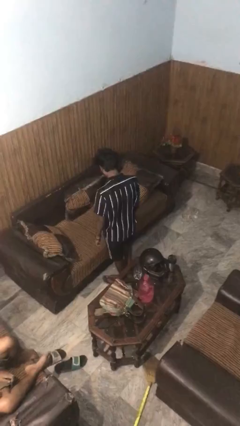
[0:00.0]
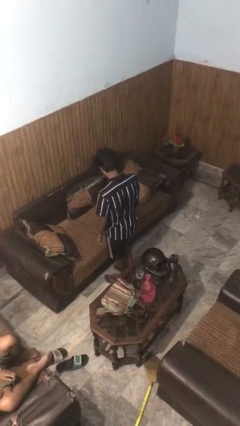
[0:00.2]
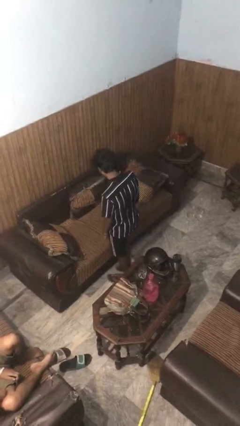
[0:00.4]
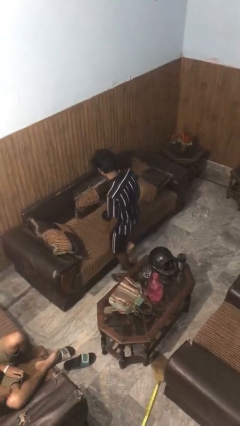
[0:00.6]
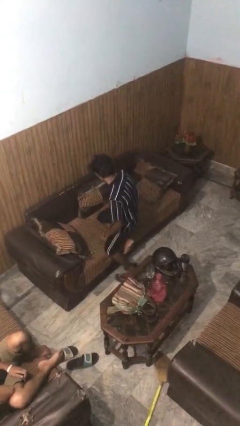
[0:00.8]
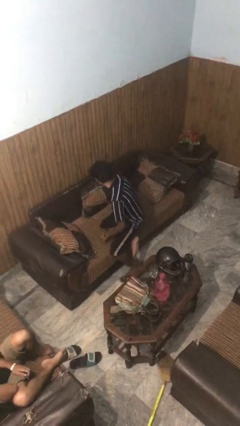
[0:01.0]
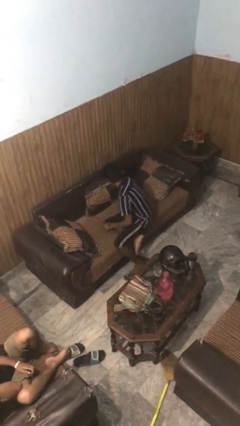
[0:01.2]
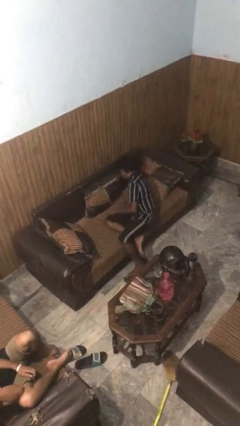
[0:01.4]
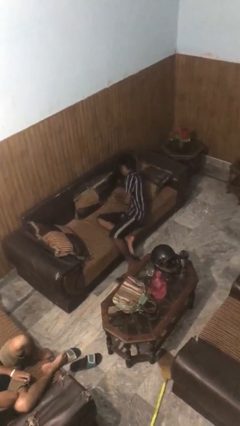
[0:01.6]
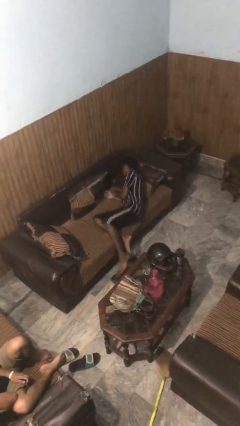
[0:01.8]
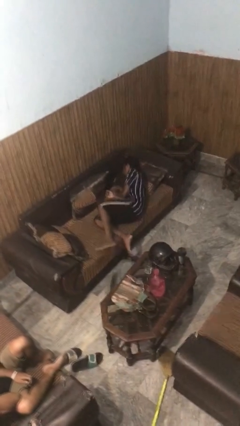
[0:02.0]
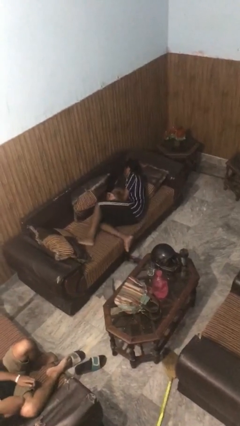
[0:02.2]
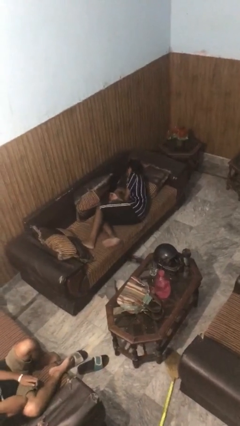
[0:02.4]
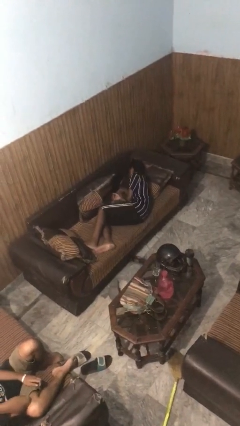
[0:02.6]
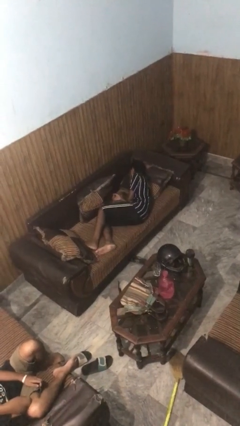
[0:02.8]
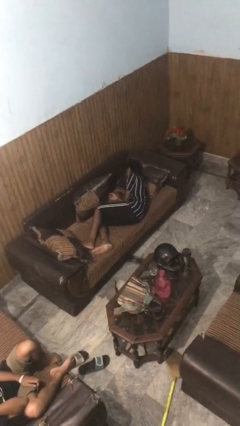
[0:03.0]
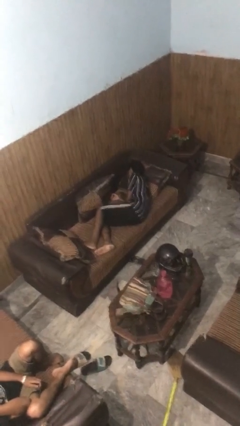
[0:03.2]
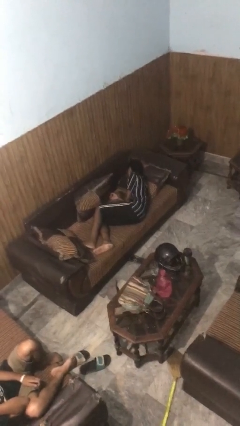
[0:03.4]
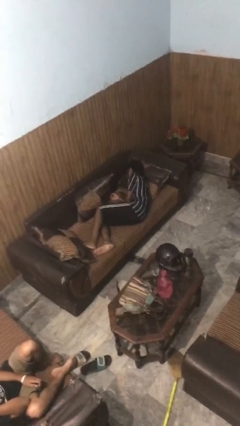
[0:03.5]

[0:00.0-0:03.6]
person lies down on couch

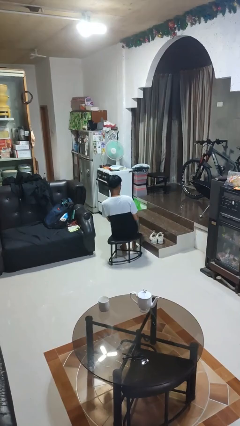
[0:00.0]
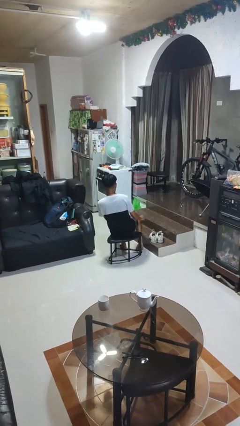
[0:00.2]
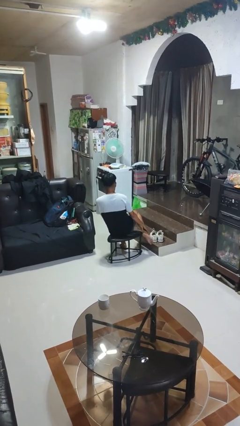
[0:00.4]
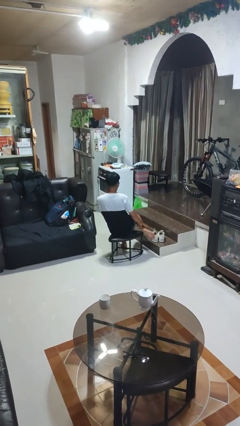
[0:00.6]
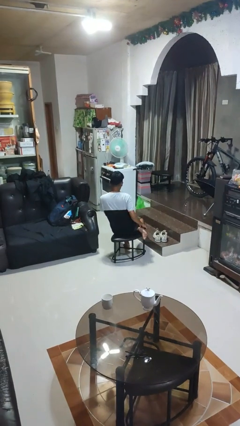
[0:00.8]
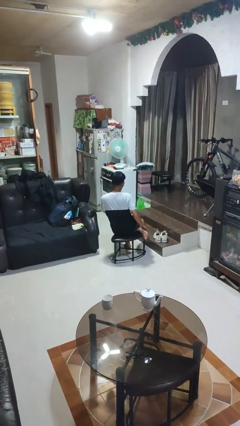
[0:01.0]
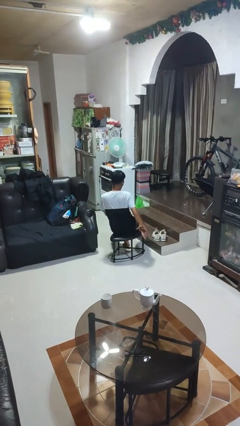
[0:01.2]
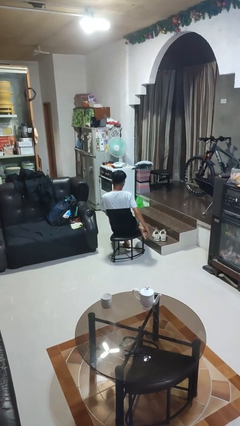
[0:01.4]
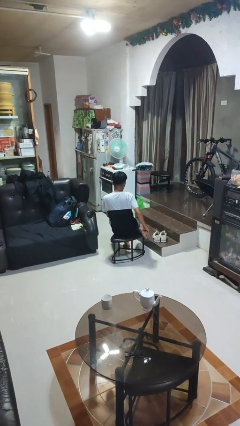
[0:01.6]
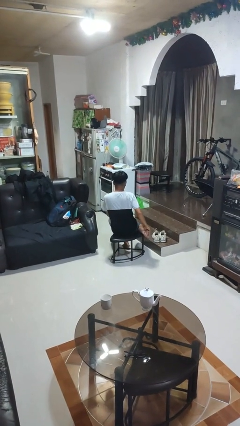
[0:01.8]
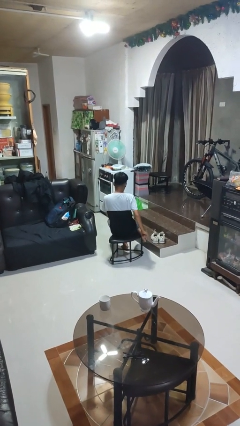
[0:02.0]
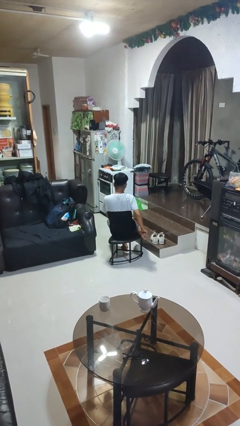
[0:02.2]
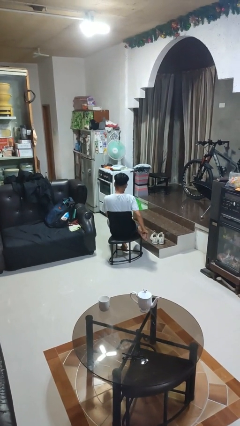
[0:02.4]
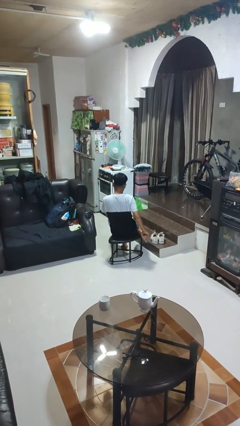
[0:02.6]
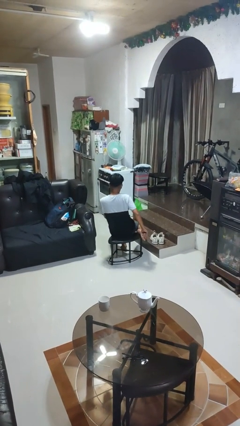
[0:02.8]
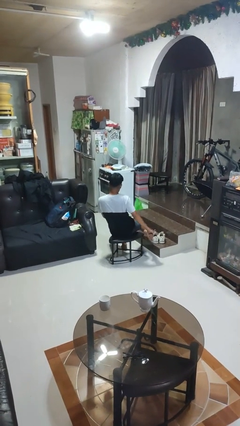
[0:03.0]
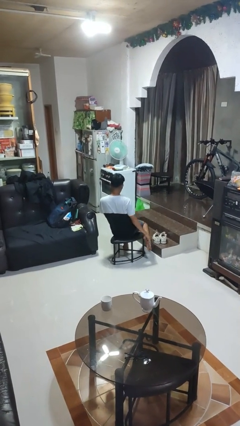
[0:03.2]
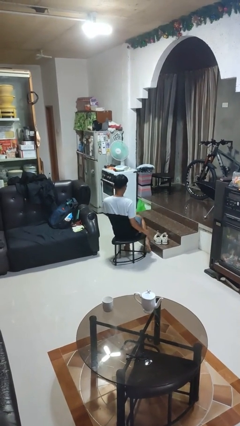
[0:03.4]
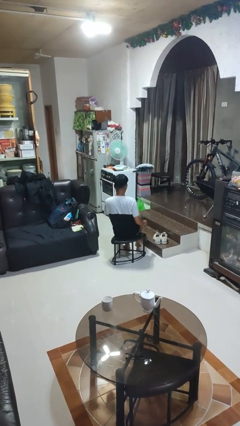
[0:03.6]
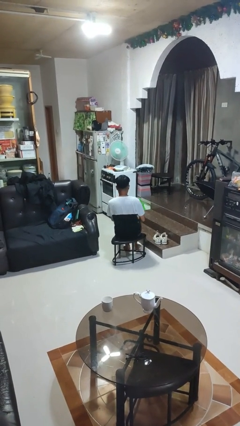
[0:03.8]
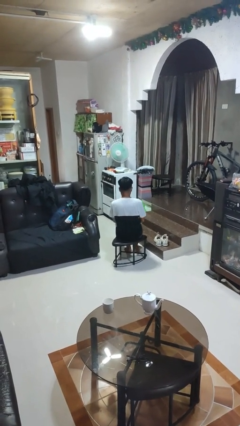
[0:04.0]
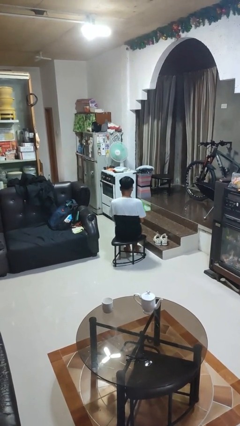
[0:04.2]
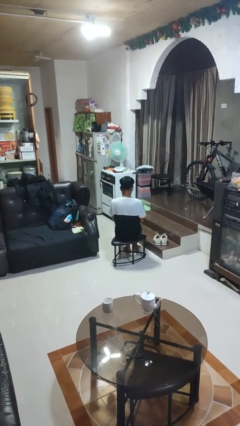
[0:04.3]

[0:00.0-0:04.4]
person rubs foot

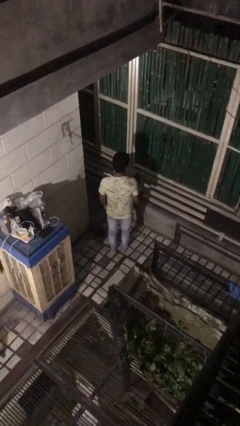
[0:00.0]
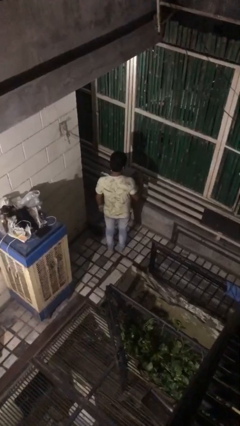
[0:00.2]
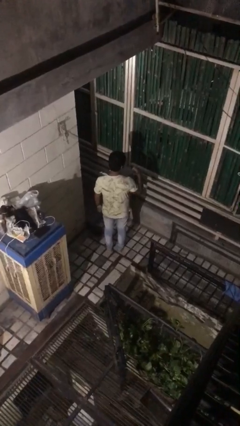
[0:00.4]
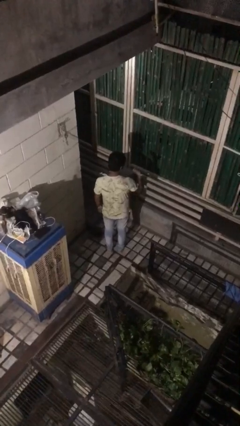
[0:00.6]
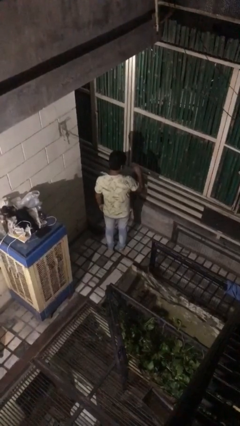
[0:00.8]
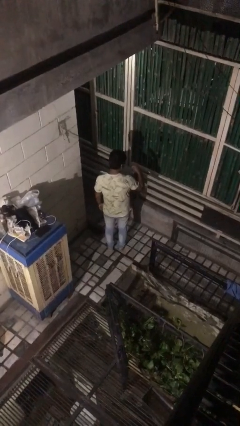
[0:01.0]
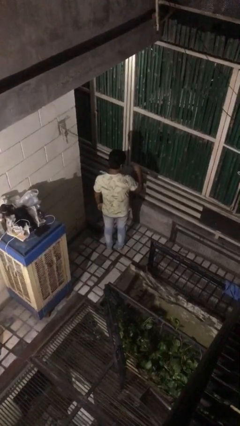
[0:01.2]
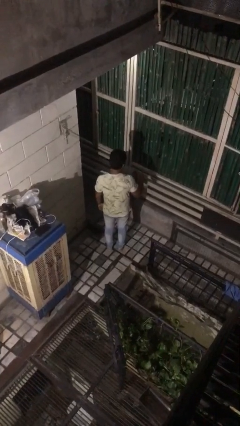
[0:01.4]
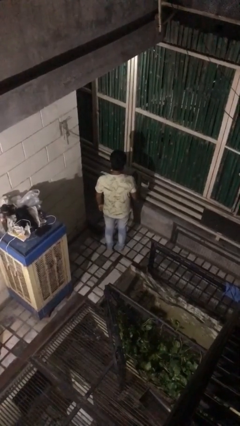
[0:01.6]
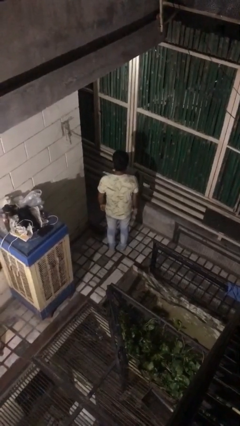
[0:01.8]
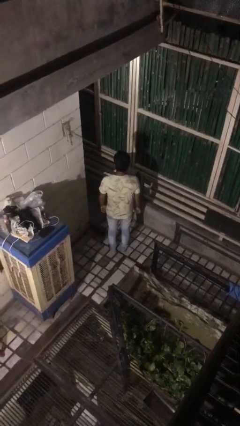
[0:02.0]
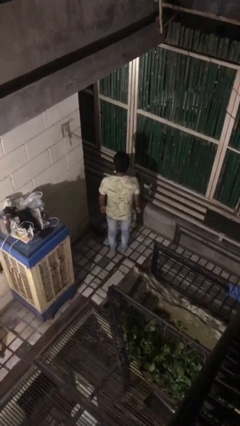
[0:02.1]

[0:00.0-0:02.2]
person gestures behind me

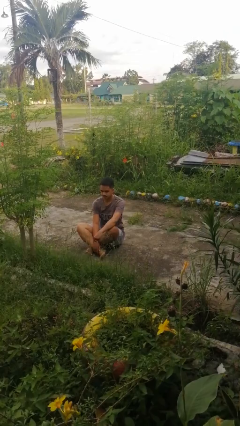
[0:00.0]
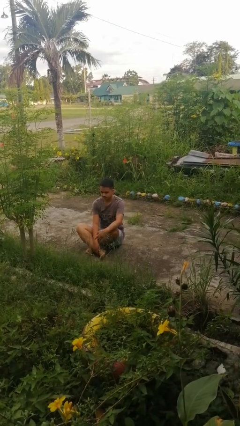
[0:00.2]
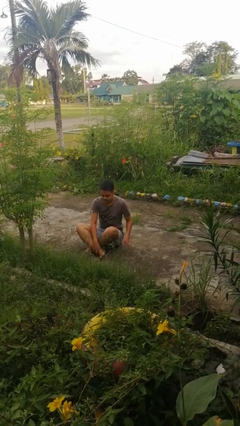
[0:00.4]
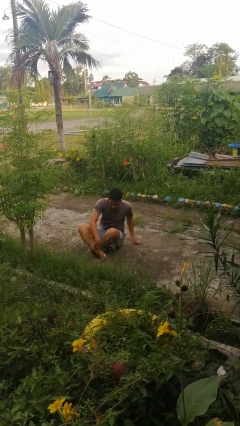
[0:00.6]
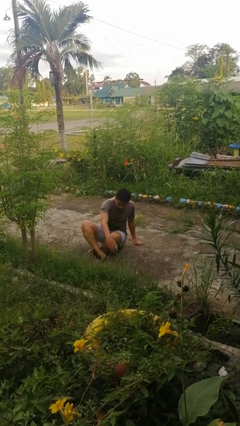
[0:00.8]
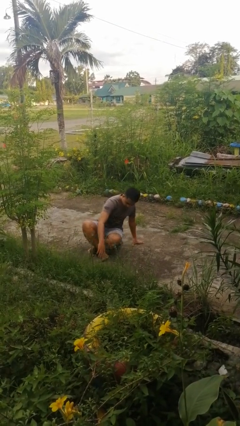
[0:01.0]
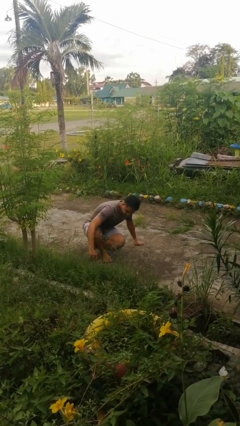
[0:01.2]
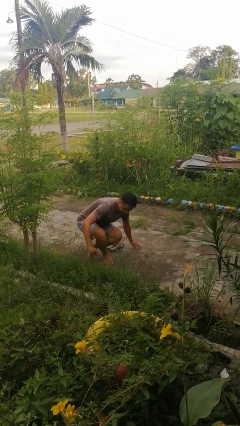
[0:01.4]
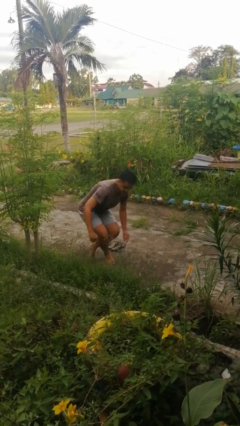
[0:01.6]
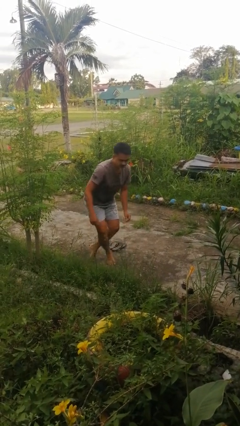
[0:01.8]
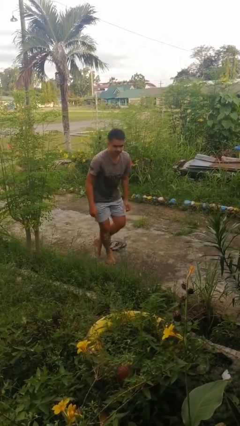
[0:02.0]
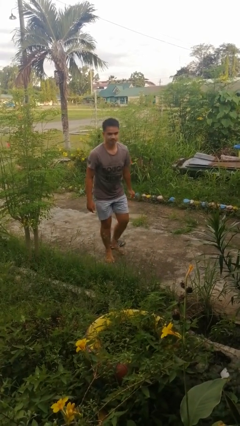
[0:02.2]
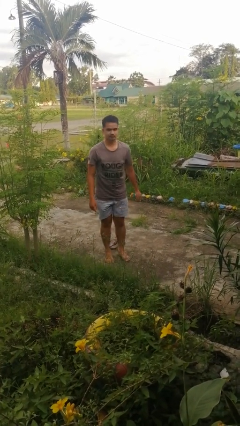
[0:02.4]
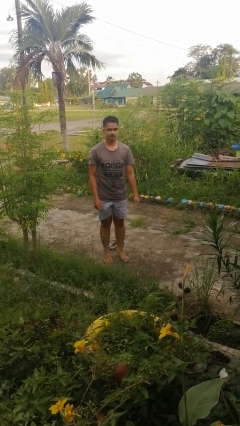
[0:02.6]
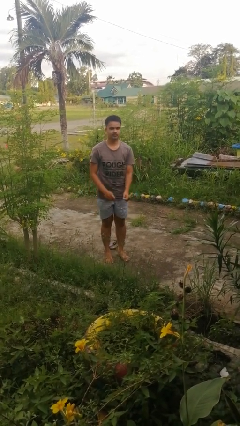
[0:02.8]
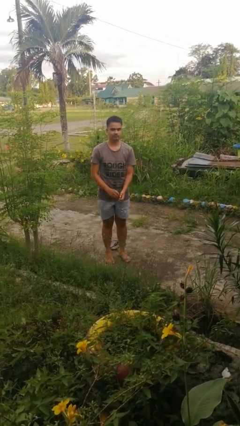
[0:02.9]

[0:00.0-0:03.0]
person stands up from floor

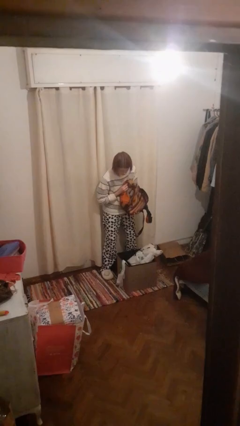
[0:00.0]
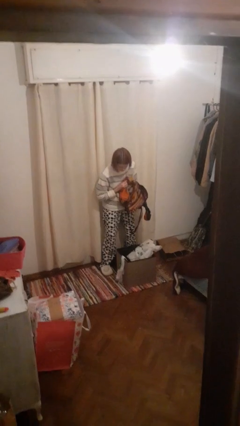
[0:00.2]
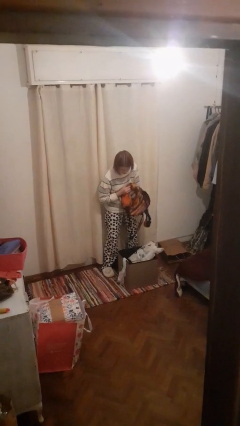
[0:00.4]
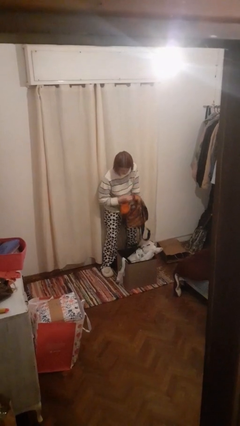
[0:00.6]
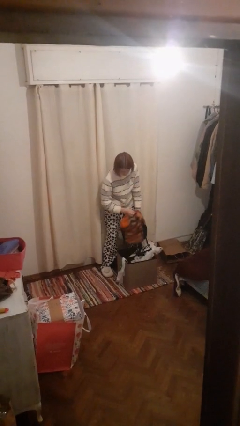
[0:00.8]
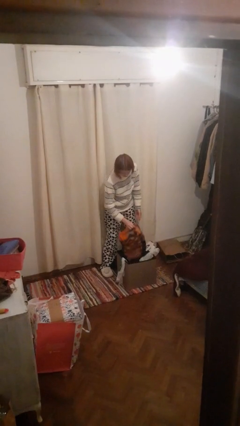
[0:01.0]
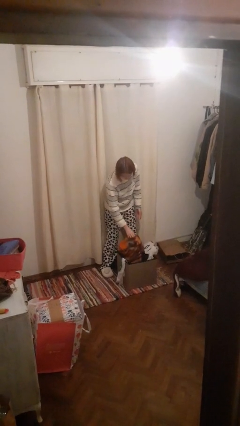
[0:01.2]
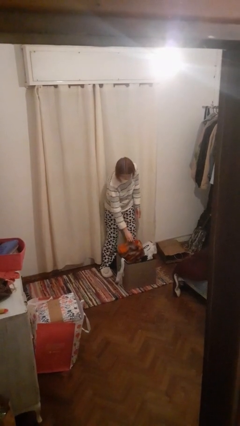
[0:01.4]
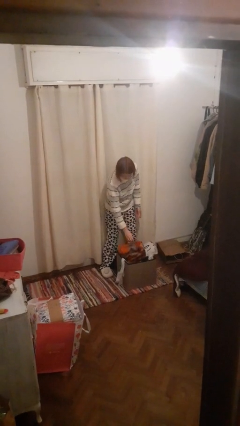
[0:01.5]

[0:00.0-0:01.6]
person puts object into basket

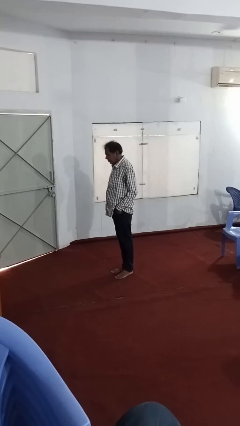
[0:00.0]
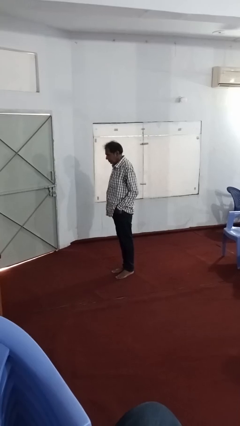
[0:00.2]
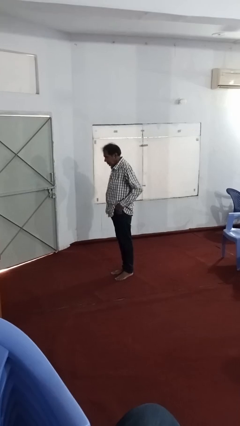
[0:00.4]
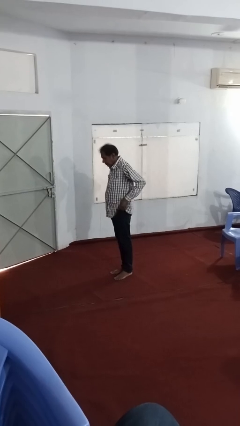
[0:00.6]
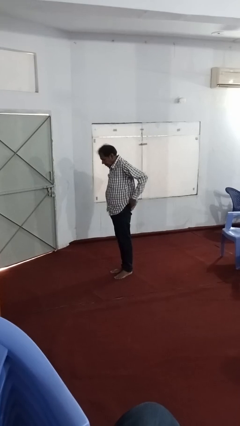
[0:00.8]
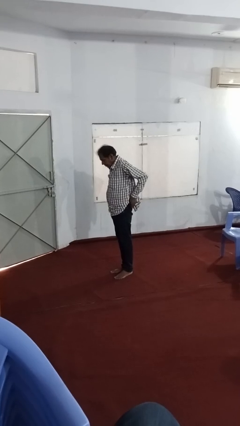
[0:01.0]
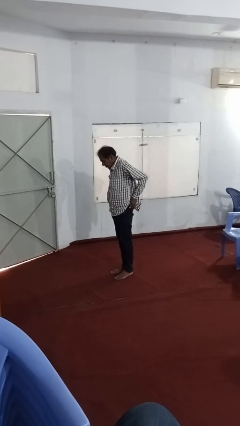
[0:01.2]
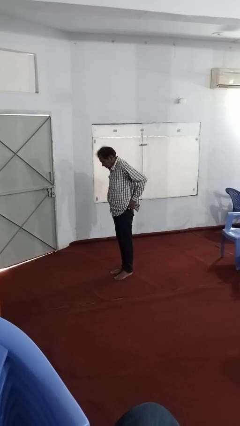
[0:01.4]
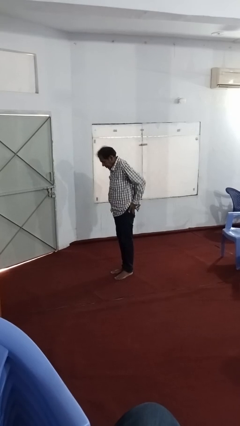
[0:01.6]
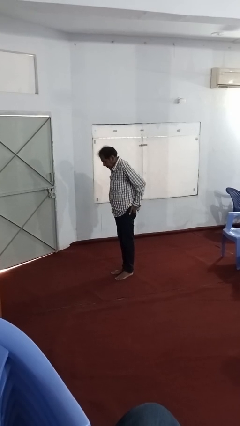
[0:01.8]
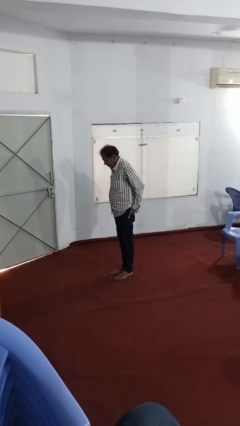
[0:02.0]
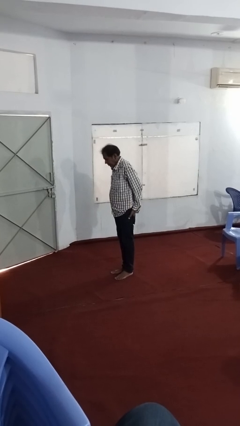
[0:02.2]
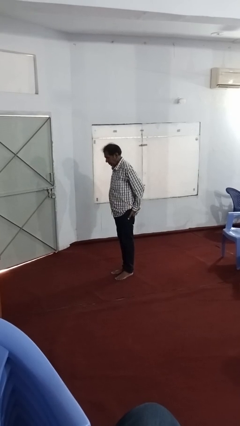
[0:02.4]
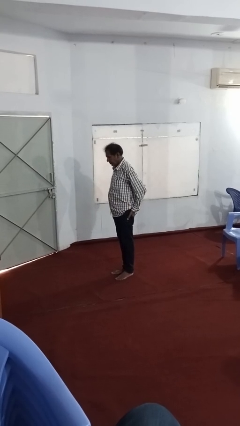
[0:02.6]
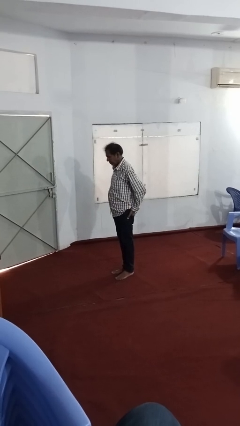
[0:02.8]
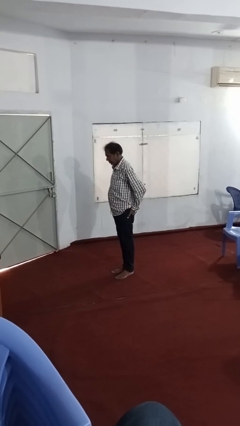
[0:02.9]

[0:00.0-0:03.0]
person puts hands in back pockets
